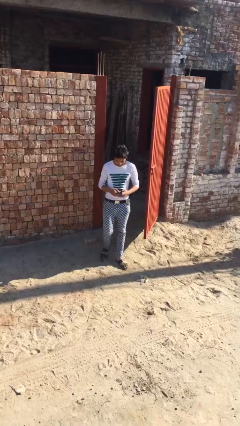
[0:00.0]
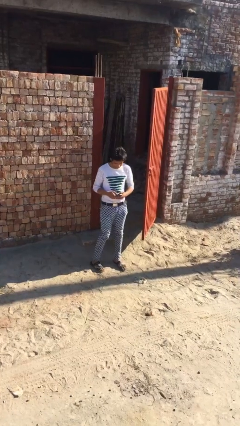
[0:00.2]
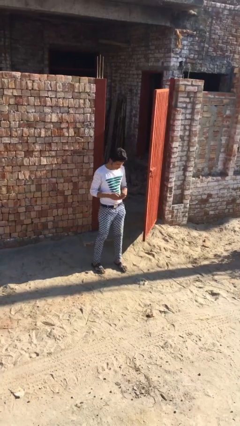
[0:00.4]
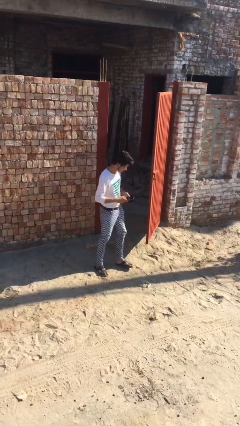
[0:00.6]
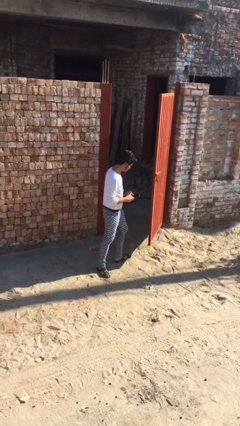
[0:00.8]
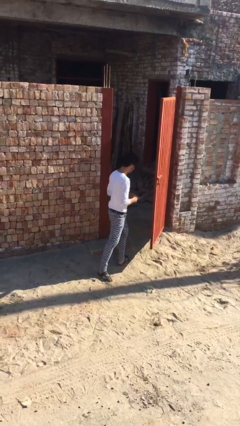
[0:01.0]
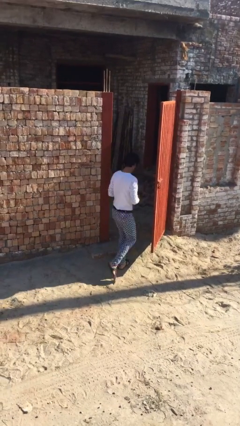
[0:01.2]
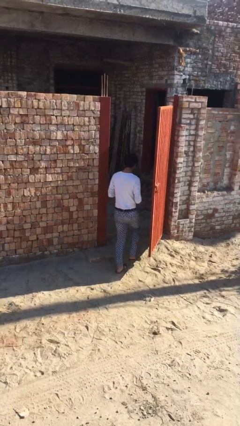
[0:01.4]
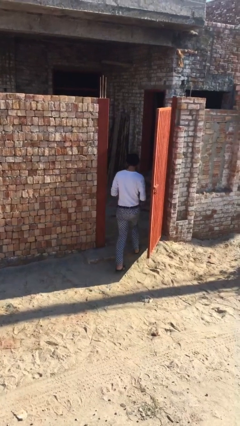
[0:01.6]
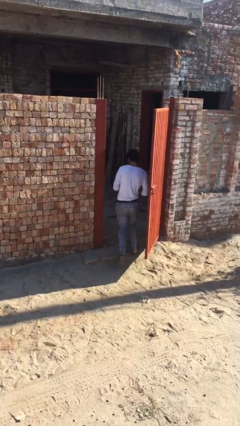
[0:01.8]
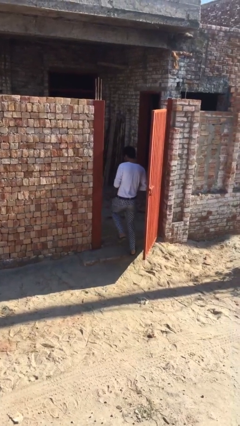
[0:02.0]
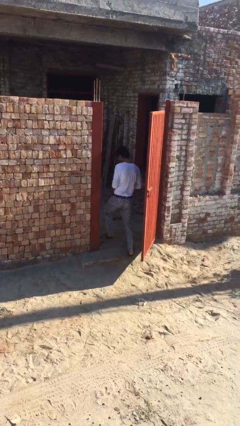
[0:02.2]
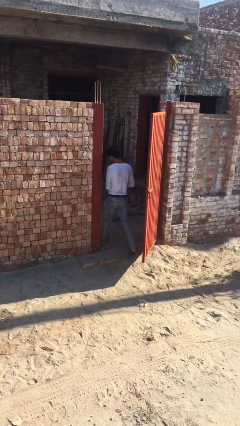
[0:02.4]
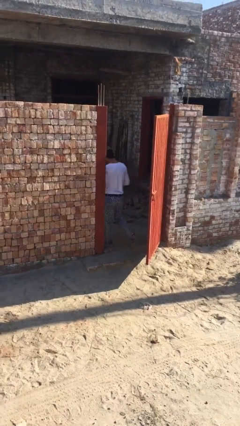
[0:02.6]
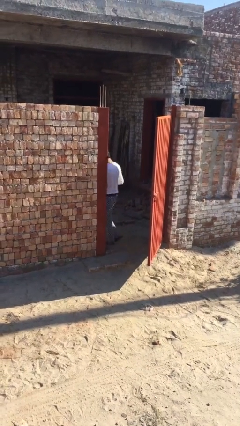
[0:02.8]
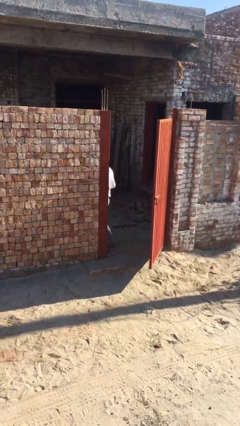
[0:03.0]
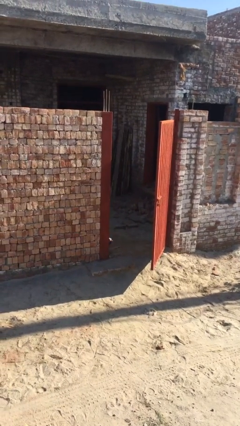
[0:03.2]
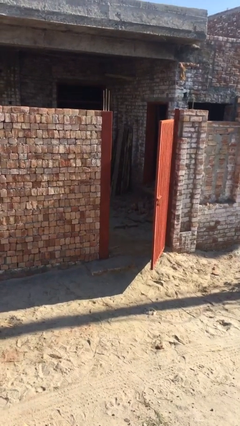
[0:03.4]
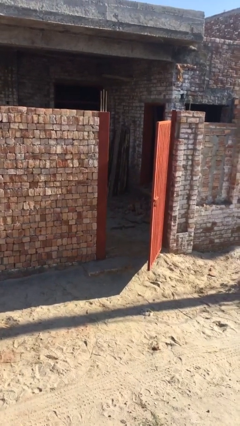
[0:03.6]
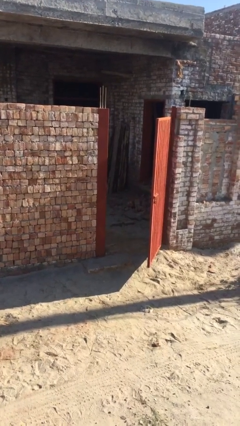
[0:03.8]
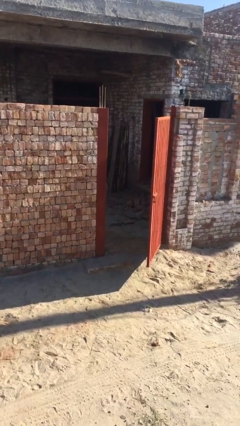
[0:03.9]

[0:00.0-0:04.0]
person exits scene through structure

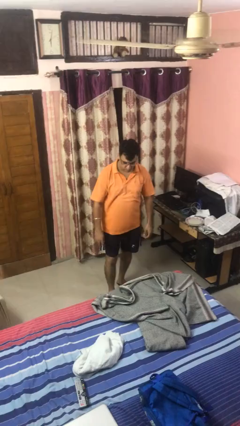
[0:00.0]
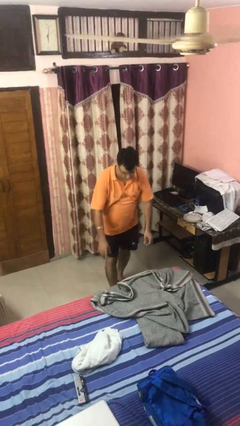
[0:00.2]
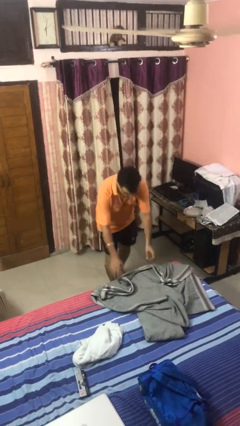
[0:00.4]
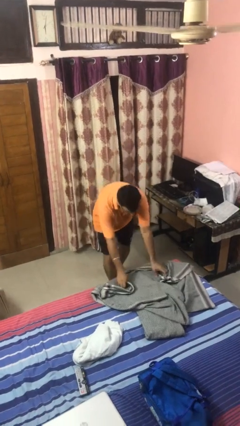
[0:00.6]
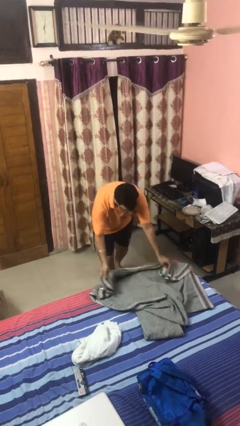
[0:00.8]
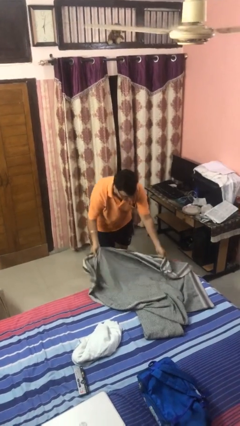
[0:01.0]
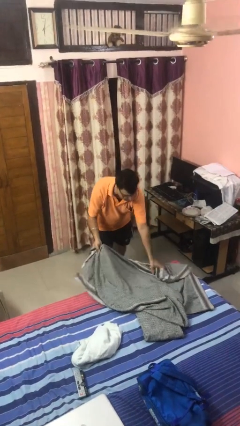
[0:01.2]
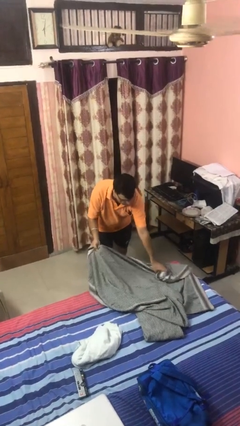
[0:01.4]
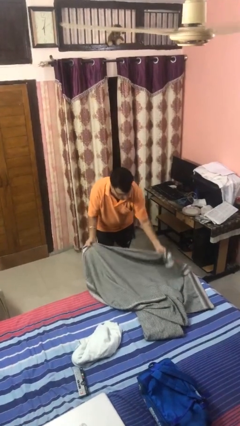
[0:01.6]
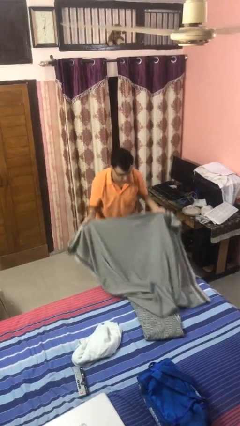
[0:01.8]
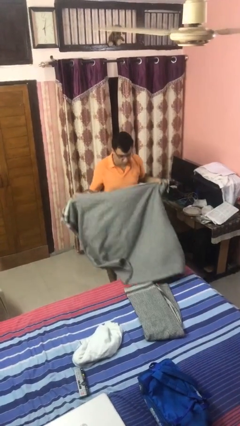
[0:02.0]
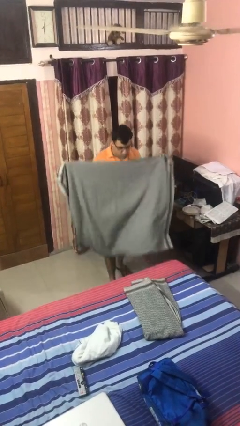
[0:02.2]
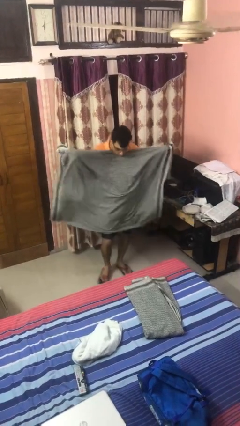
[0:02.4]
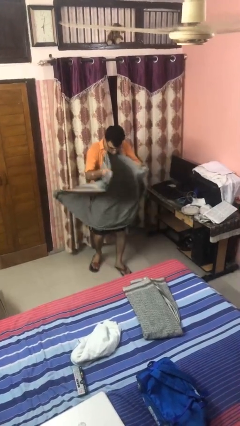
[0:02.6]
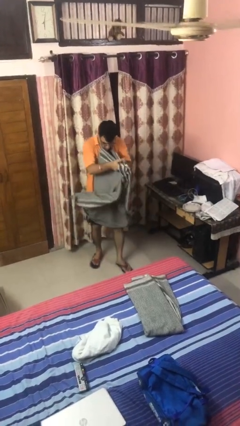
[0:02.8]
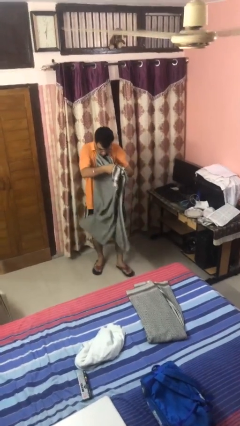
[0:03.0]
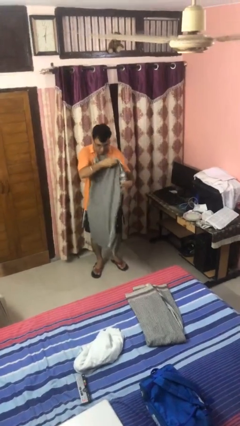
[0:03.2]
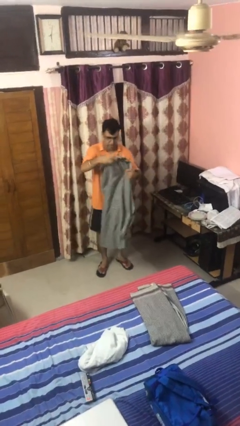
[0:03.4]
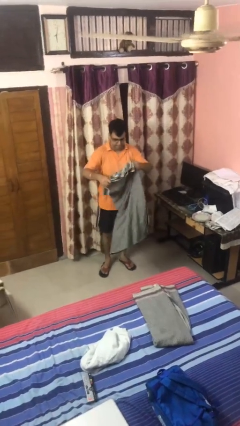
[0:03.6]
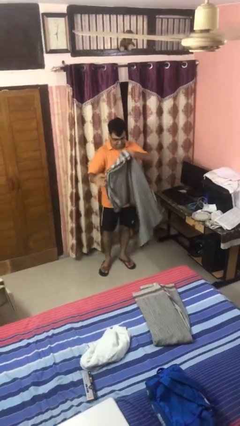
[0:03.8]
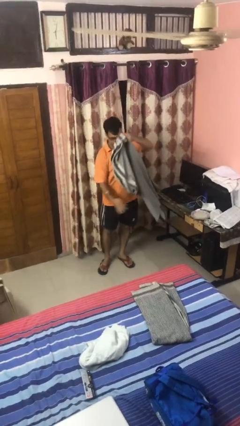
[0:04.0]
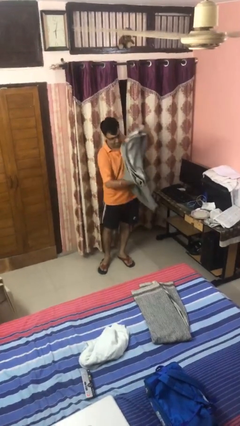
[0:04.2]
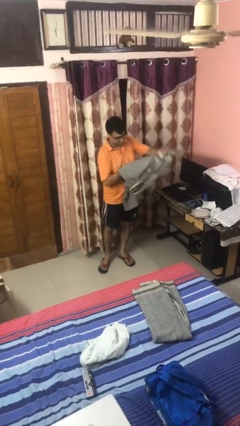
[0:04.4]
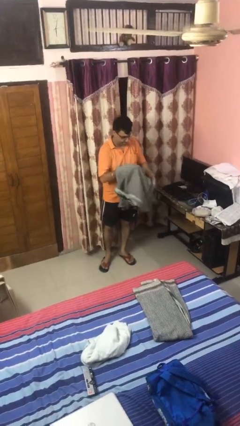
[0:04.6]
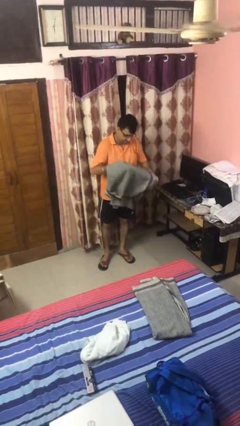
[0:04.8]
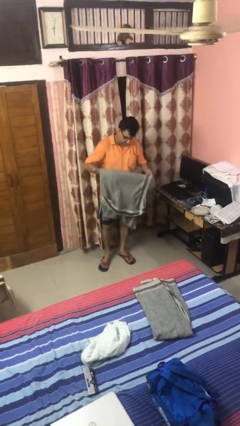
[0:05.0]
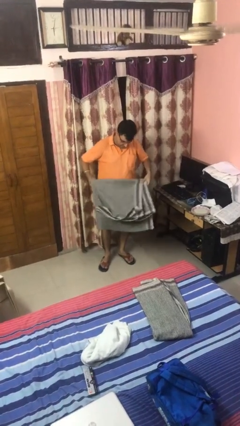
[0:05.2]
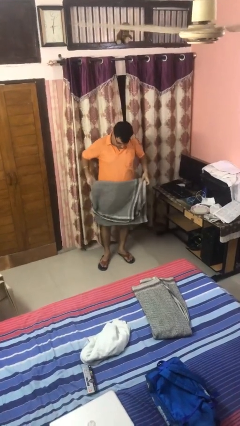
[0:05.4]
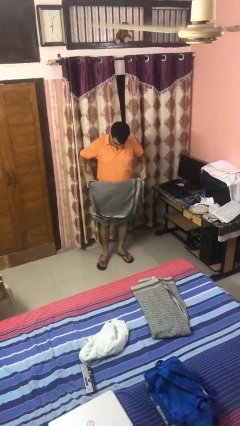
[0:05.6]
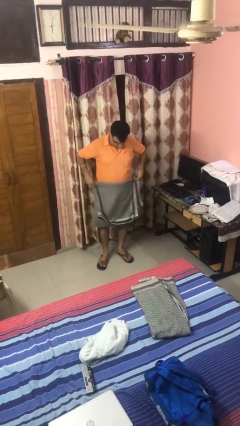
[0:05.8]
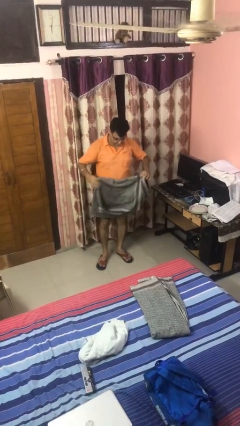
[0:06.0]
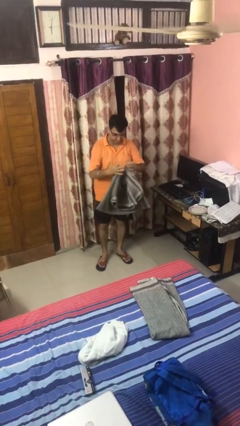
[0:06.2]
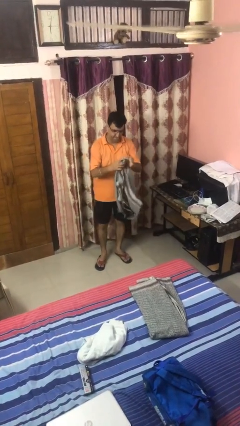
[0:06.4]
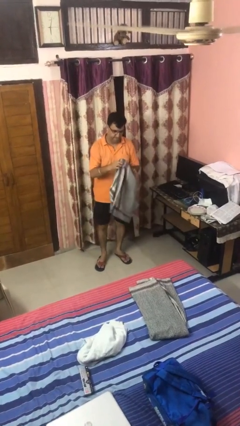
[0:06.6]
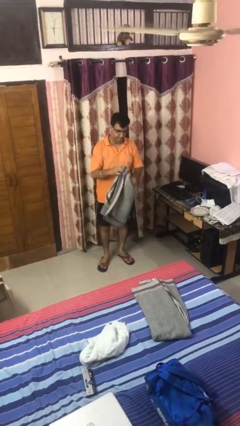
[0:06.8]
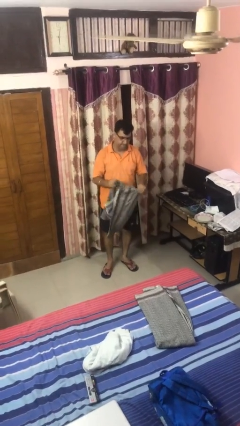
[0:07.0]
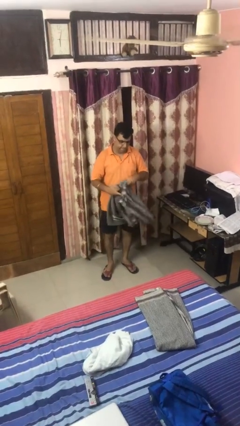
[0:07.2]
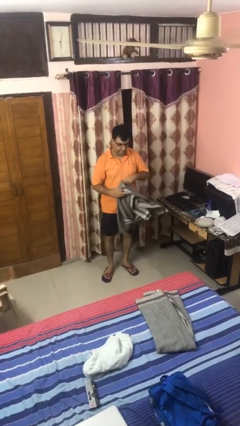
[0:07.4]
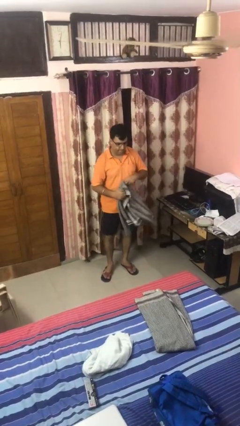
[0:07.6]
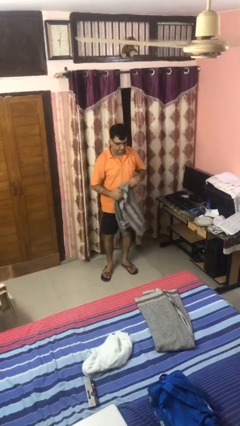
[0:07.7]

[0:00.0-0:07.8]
person folds blanket

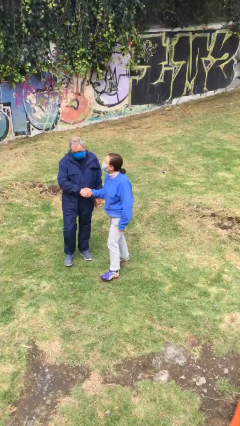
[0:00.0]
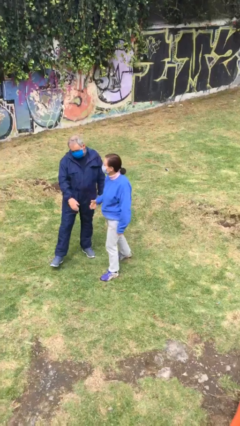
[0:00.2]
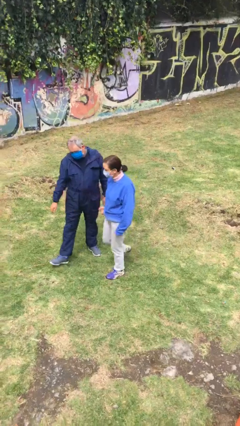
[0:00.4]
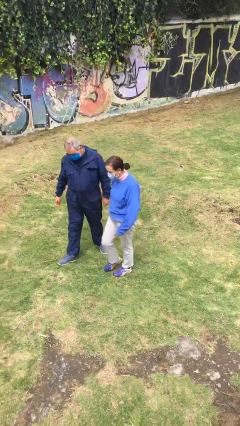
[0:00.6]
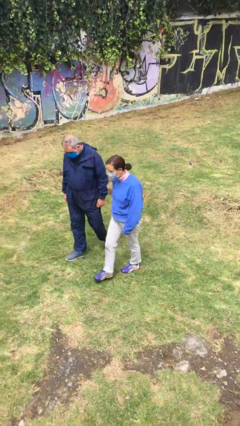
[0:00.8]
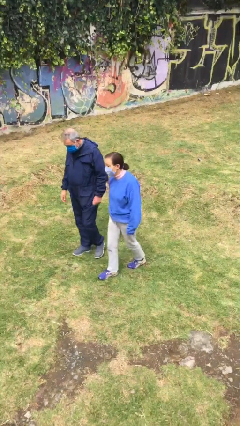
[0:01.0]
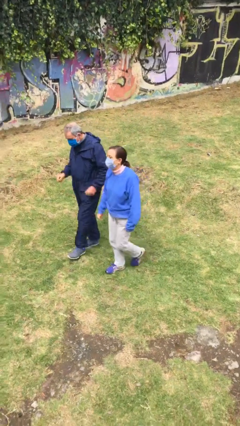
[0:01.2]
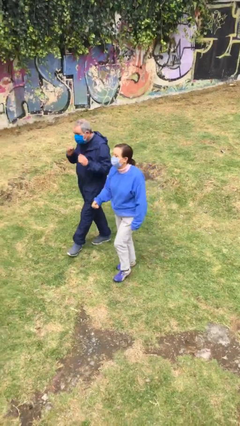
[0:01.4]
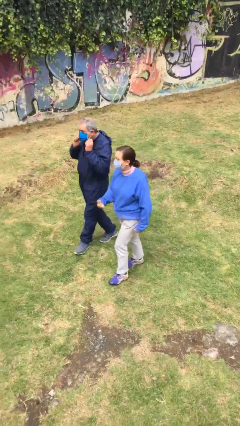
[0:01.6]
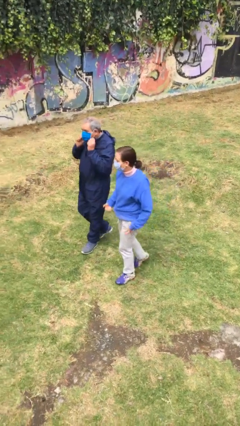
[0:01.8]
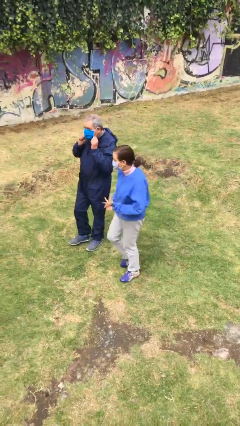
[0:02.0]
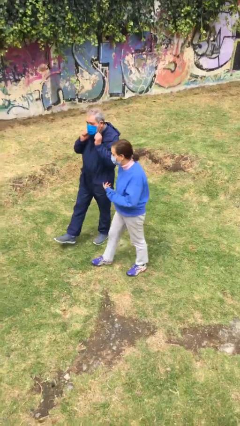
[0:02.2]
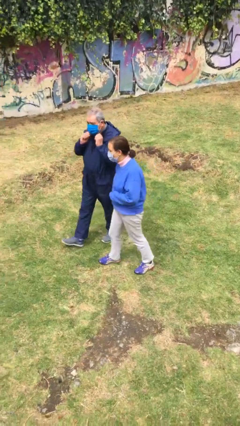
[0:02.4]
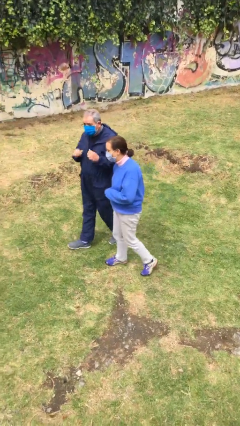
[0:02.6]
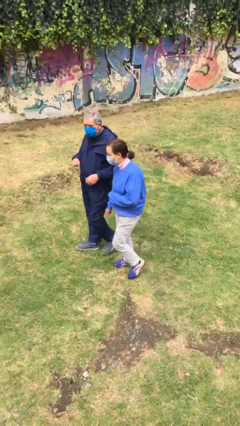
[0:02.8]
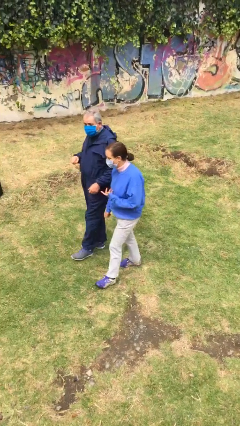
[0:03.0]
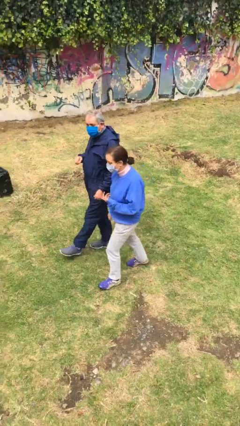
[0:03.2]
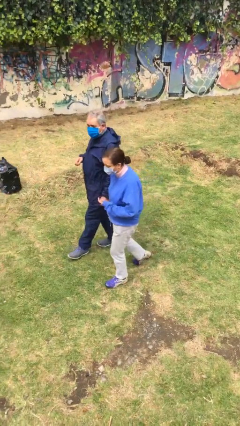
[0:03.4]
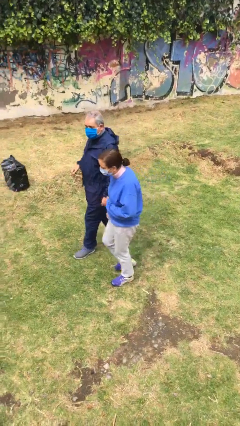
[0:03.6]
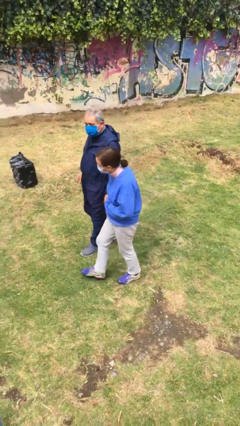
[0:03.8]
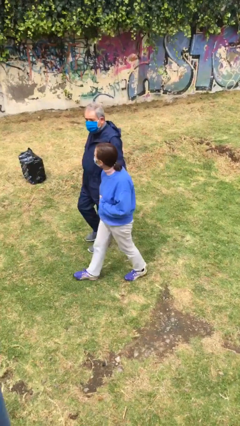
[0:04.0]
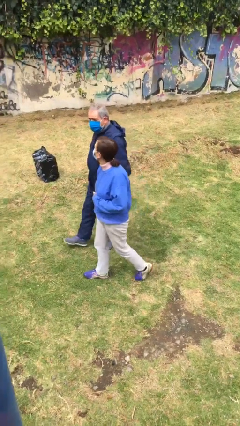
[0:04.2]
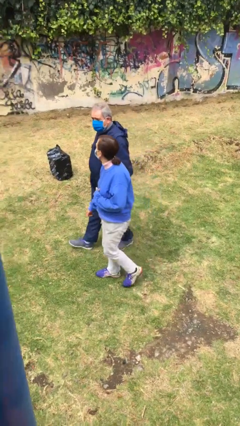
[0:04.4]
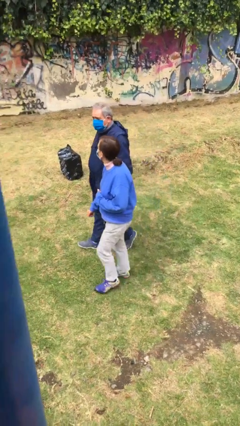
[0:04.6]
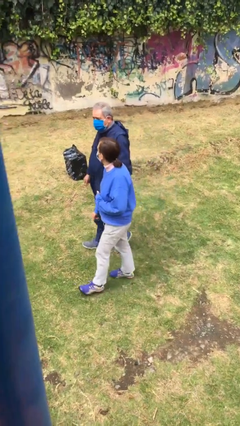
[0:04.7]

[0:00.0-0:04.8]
person talks to person

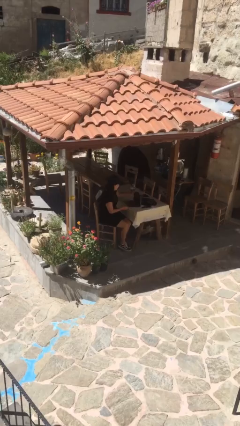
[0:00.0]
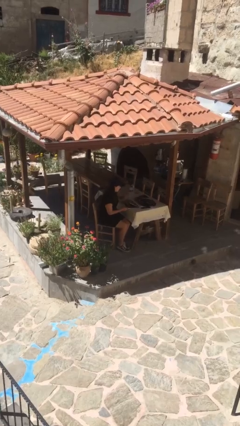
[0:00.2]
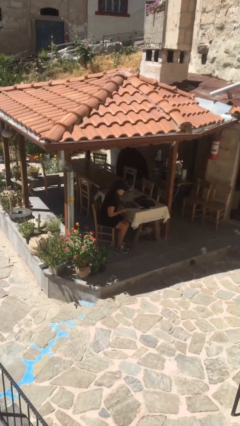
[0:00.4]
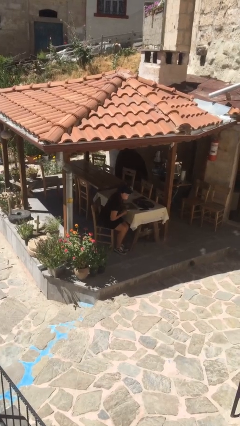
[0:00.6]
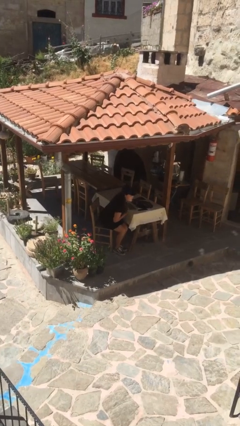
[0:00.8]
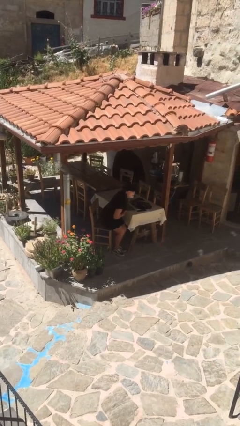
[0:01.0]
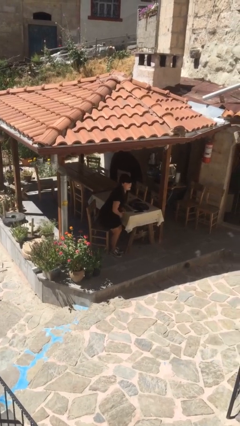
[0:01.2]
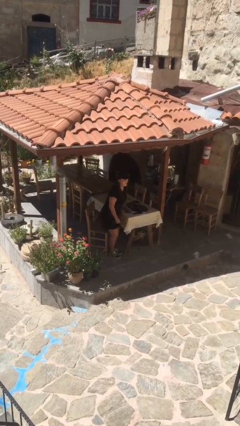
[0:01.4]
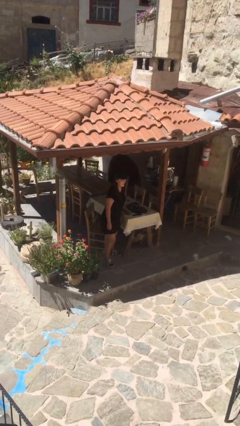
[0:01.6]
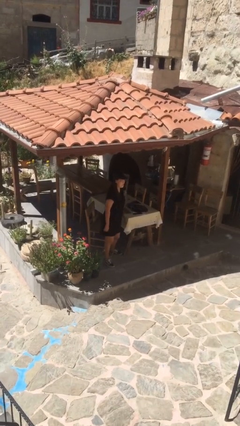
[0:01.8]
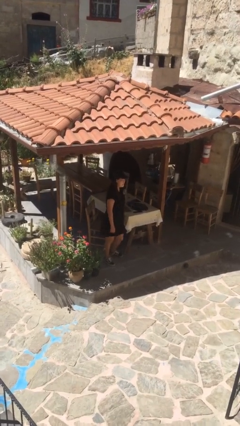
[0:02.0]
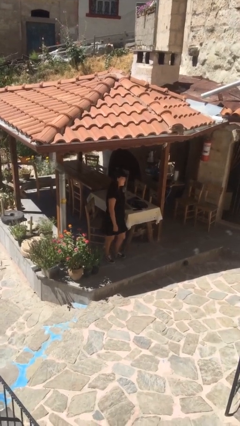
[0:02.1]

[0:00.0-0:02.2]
person stands up
